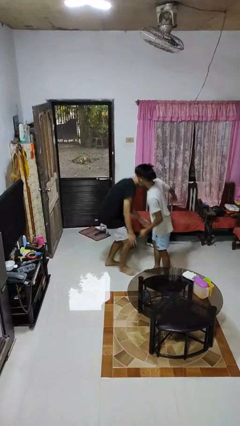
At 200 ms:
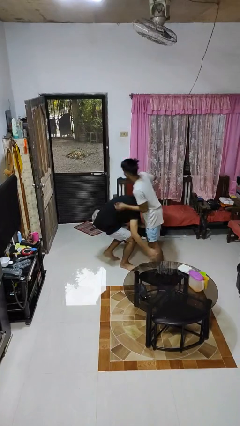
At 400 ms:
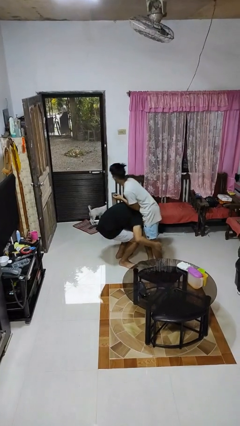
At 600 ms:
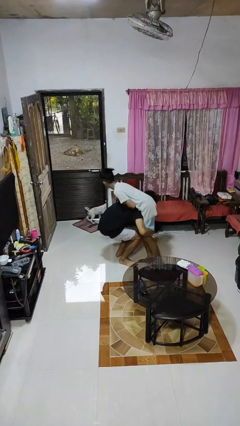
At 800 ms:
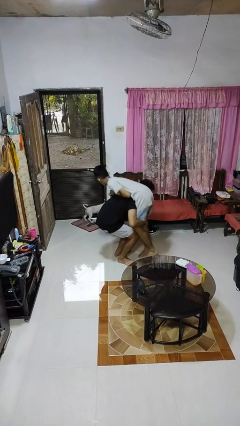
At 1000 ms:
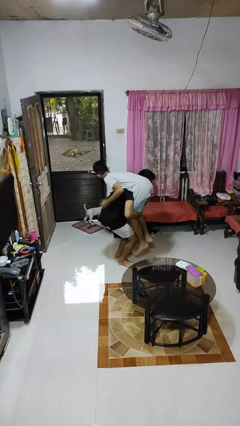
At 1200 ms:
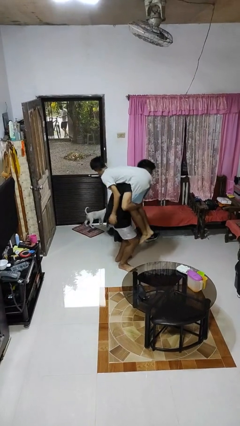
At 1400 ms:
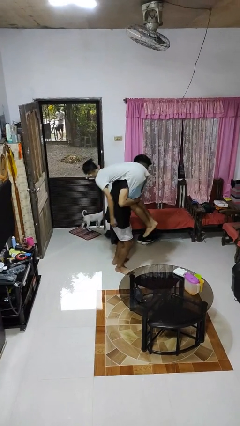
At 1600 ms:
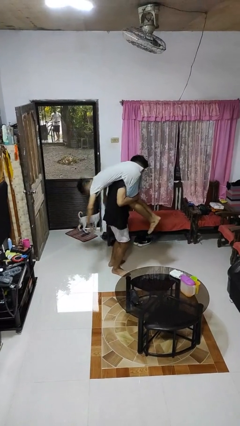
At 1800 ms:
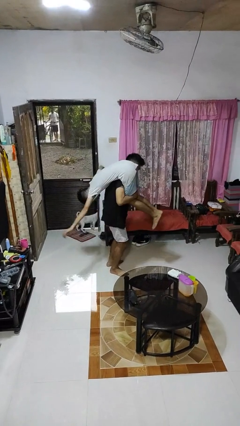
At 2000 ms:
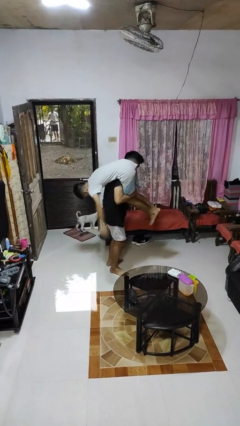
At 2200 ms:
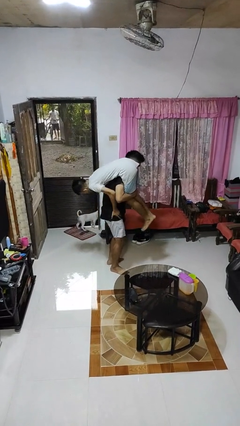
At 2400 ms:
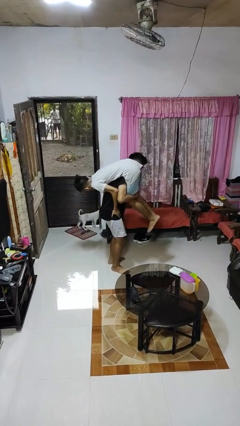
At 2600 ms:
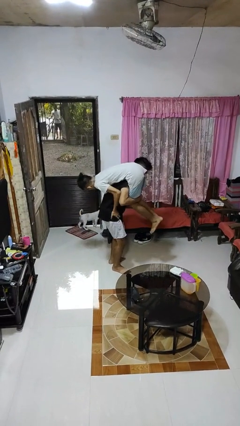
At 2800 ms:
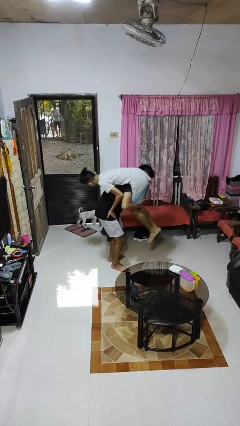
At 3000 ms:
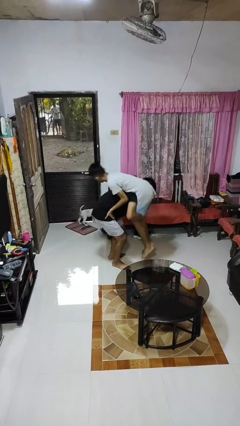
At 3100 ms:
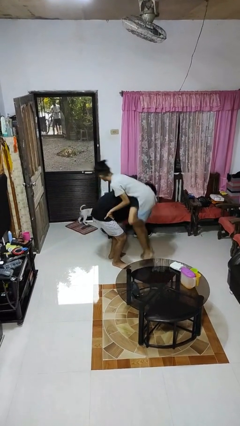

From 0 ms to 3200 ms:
person carries person over shoulder

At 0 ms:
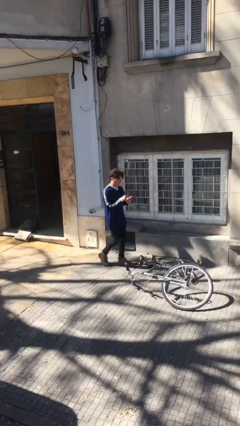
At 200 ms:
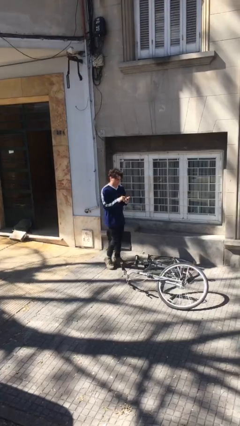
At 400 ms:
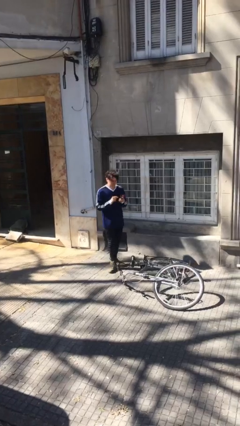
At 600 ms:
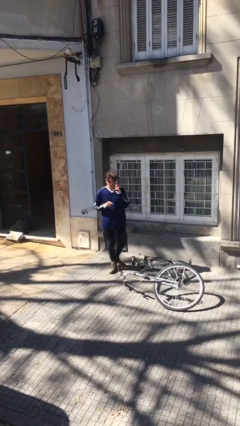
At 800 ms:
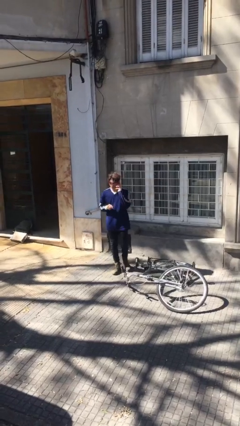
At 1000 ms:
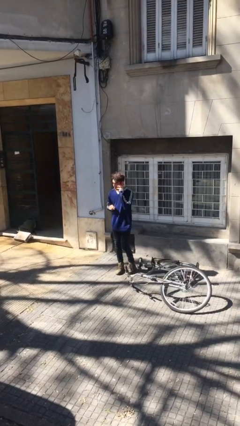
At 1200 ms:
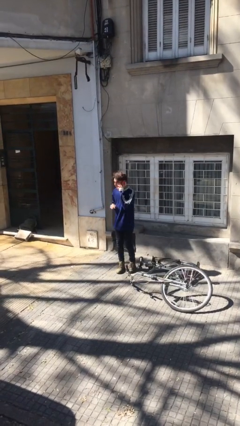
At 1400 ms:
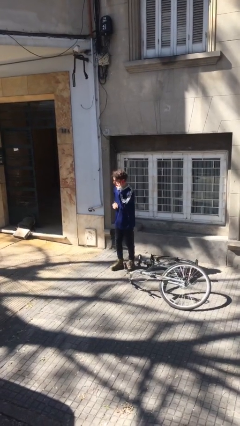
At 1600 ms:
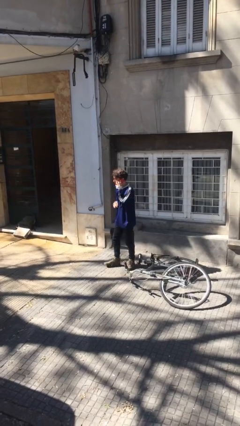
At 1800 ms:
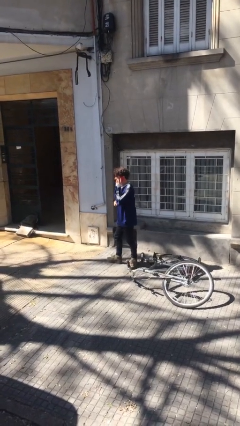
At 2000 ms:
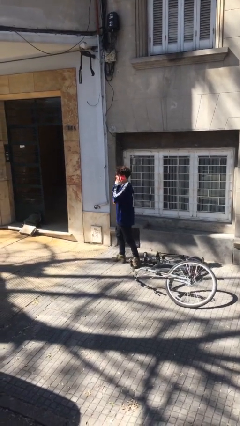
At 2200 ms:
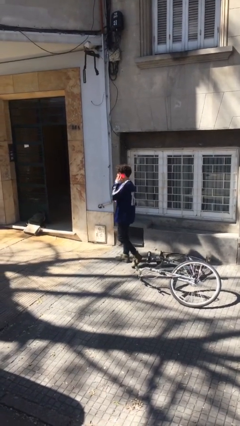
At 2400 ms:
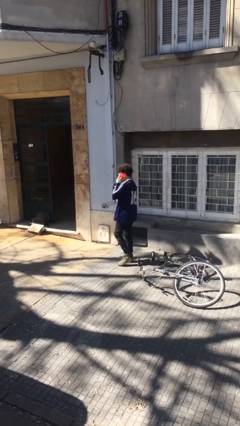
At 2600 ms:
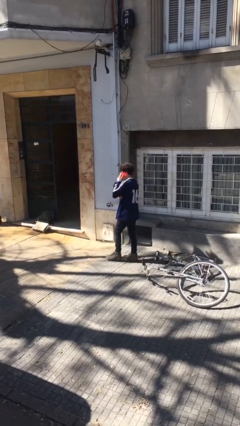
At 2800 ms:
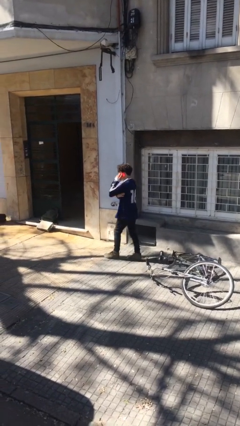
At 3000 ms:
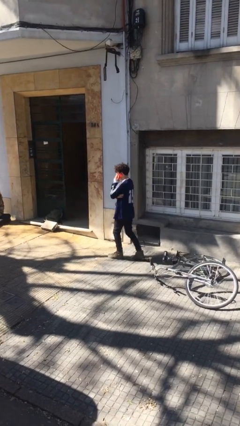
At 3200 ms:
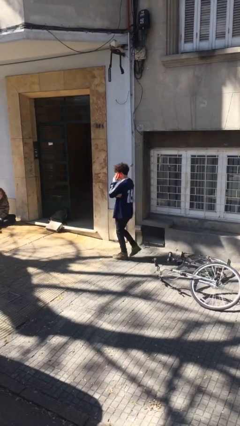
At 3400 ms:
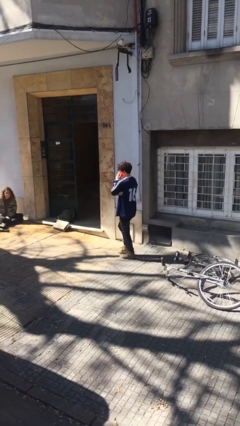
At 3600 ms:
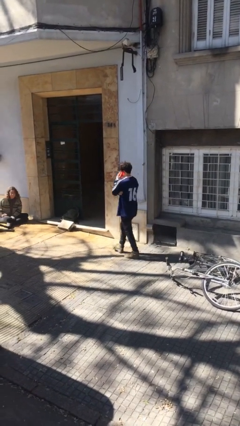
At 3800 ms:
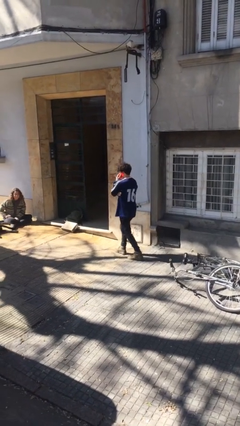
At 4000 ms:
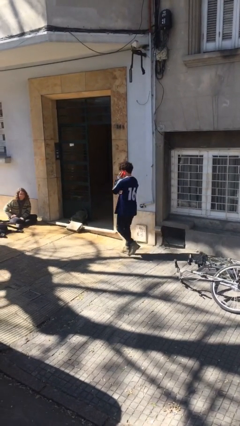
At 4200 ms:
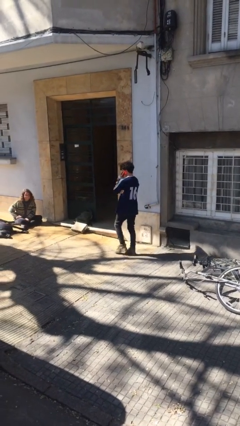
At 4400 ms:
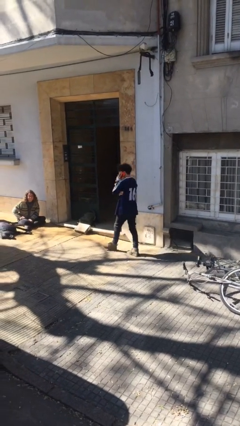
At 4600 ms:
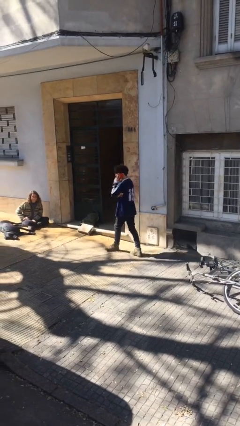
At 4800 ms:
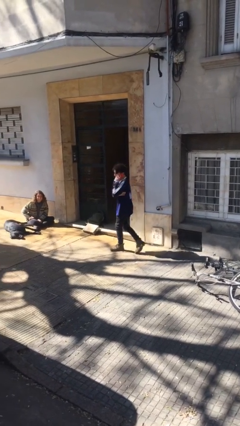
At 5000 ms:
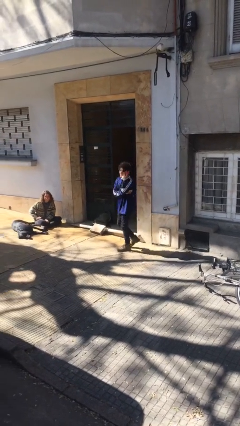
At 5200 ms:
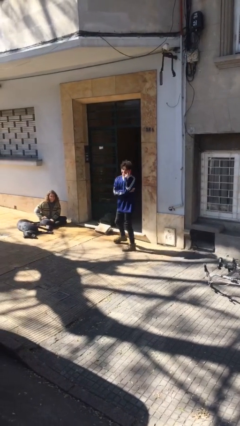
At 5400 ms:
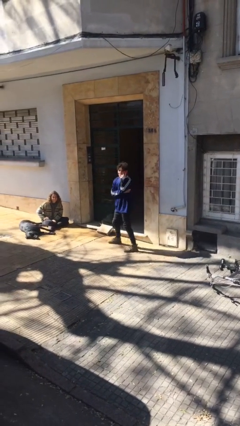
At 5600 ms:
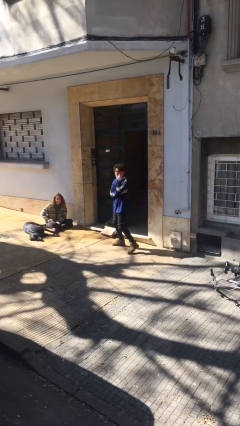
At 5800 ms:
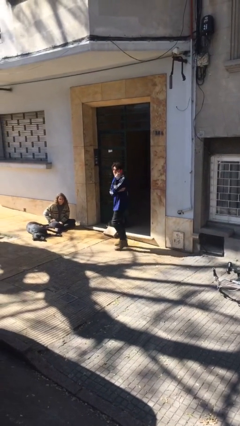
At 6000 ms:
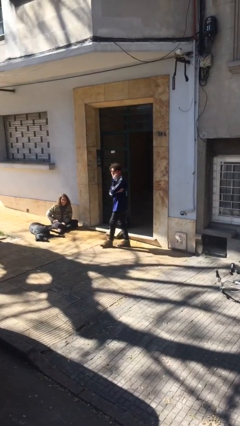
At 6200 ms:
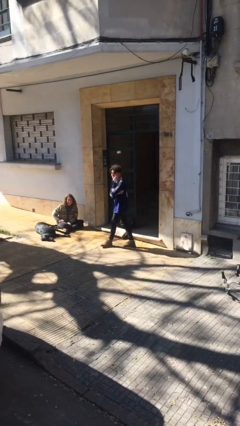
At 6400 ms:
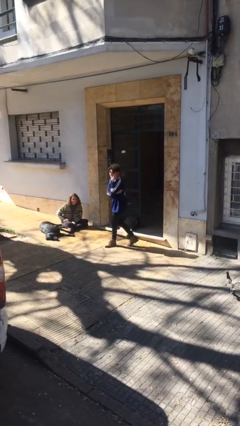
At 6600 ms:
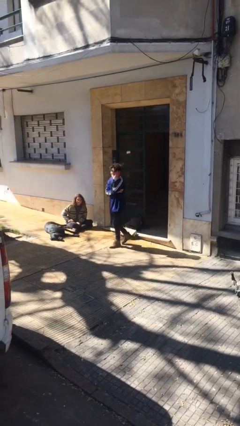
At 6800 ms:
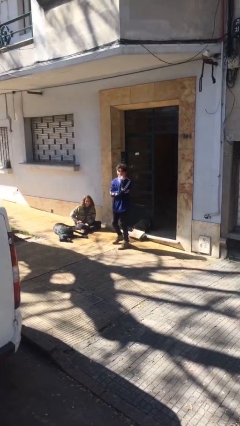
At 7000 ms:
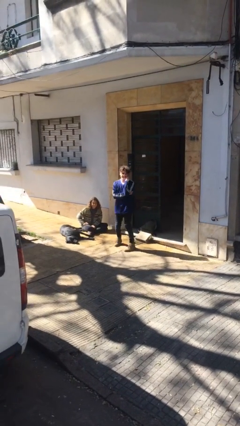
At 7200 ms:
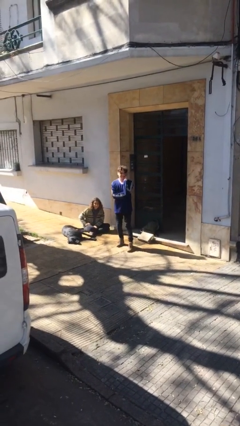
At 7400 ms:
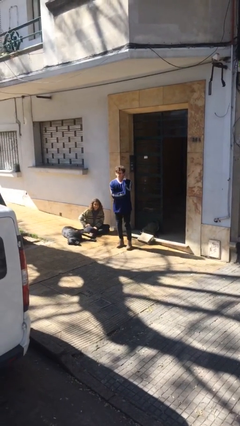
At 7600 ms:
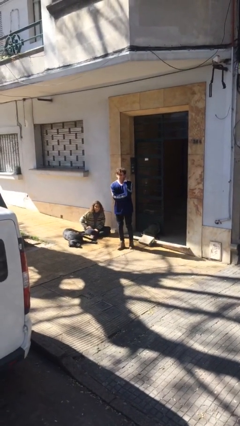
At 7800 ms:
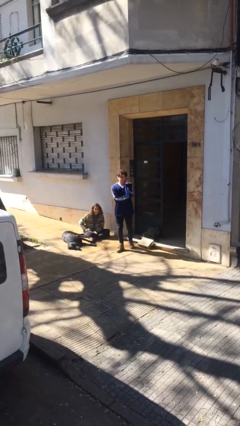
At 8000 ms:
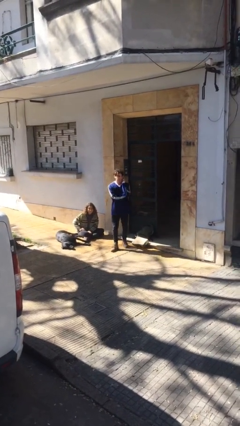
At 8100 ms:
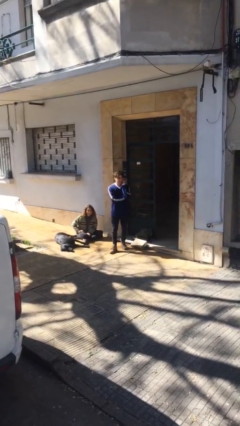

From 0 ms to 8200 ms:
person talks on phone

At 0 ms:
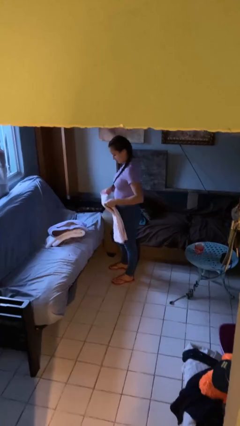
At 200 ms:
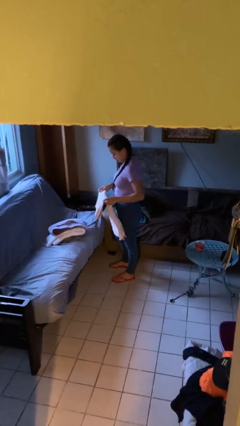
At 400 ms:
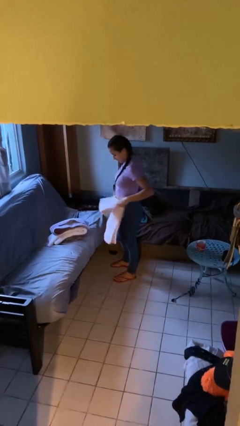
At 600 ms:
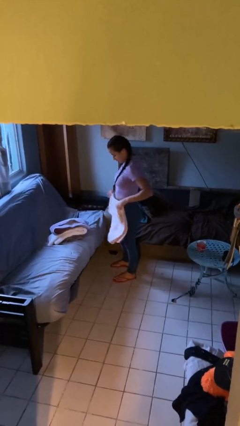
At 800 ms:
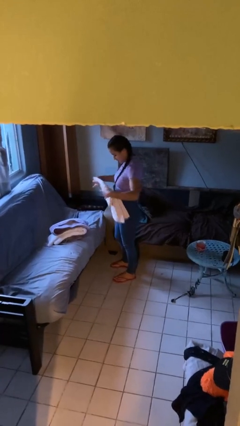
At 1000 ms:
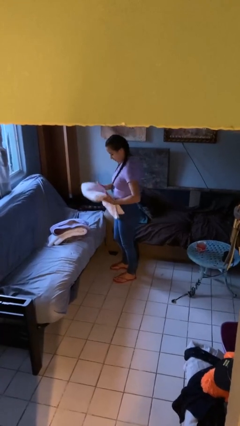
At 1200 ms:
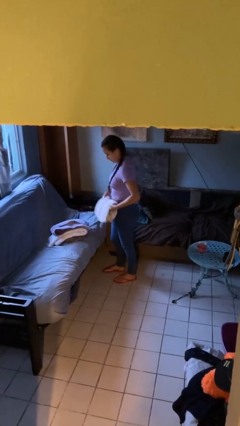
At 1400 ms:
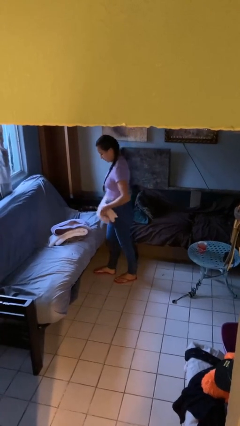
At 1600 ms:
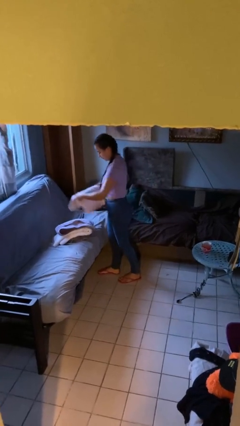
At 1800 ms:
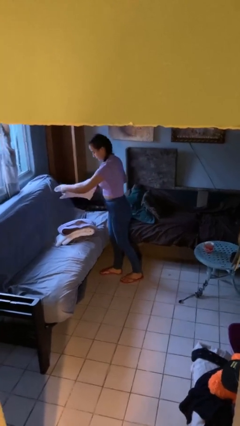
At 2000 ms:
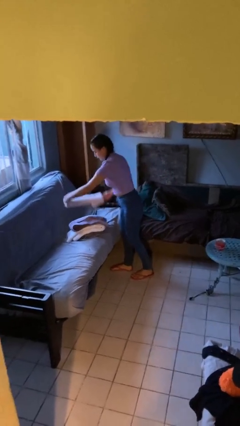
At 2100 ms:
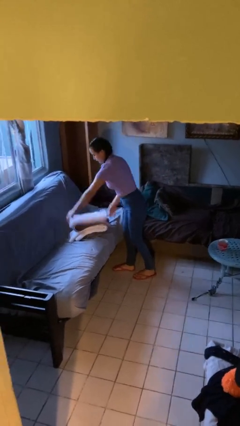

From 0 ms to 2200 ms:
person folds towel

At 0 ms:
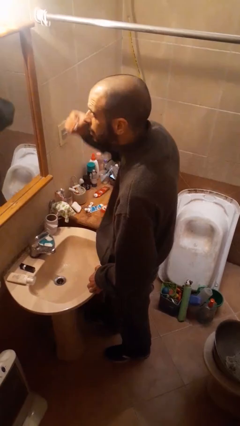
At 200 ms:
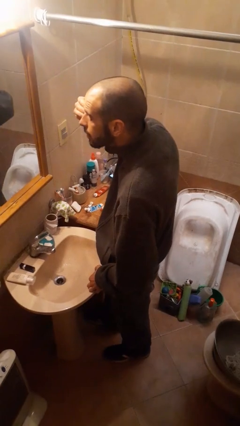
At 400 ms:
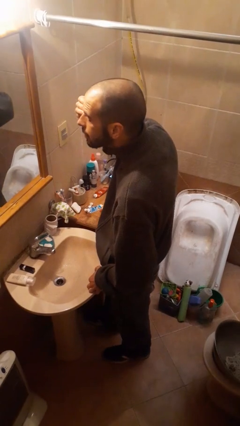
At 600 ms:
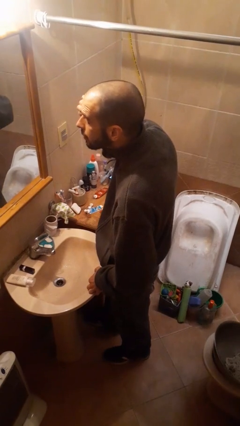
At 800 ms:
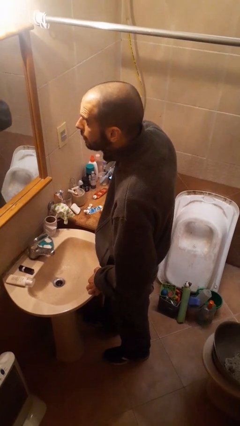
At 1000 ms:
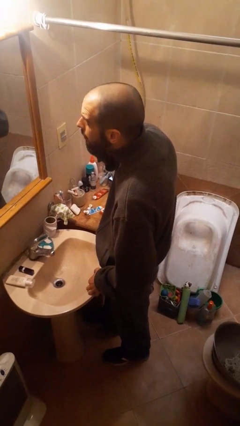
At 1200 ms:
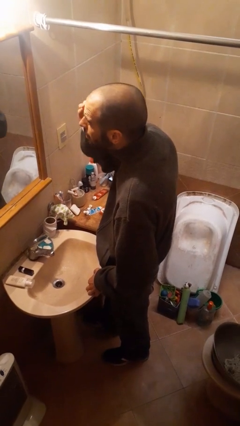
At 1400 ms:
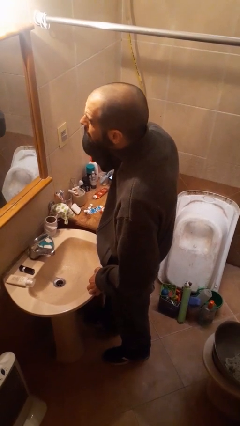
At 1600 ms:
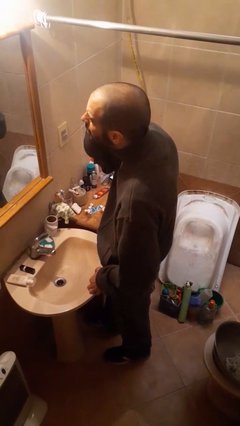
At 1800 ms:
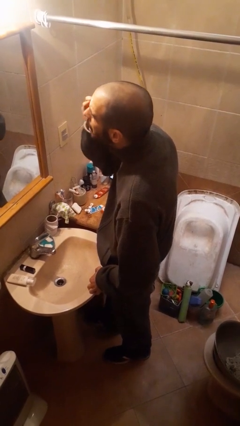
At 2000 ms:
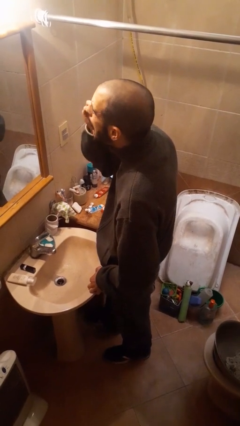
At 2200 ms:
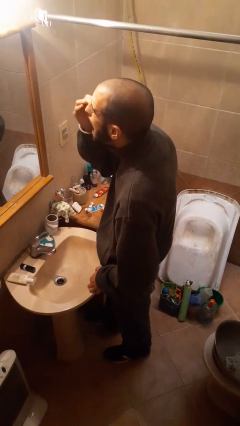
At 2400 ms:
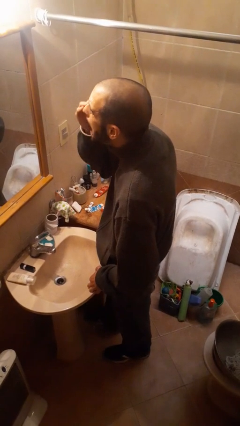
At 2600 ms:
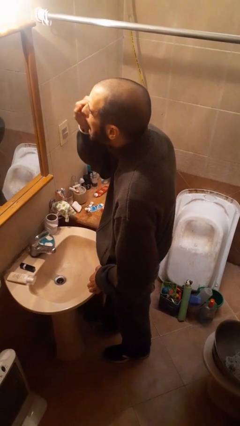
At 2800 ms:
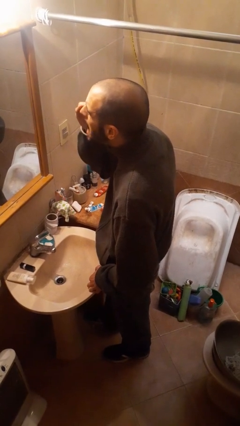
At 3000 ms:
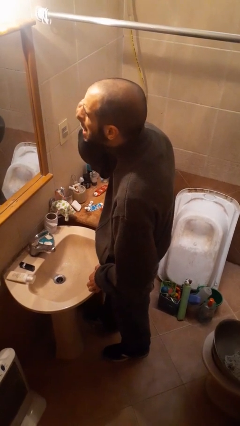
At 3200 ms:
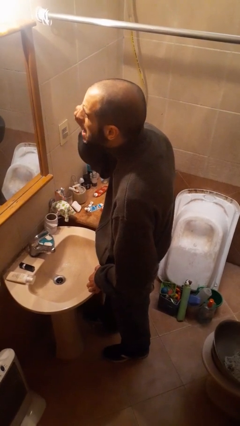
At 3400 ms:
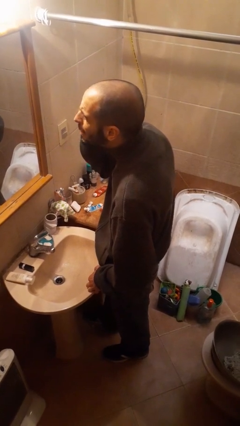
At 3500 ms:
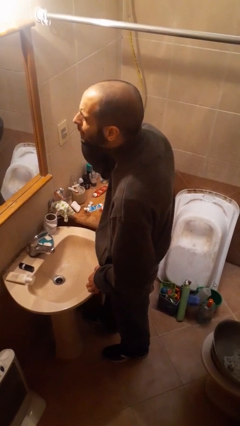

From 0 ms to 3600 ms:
person applies eye makeup

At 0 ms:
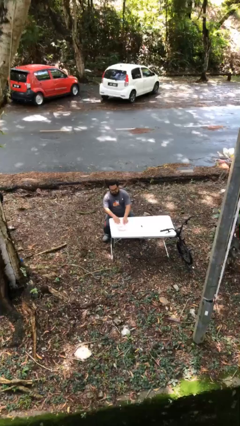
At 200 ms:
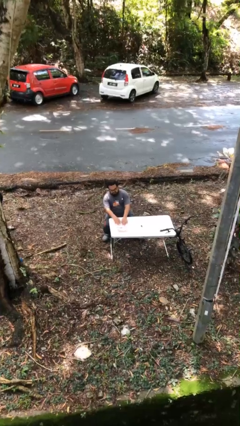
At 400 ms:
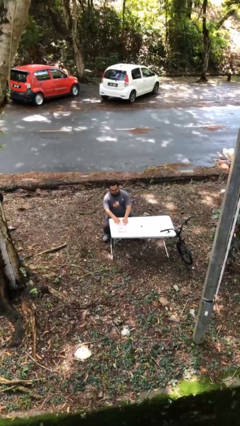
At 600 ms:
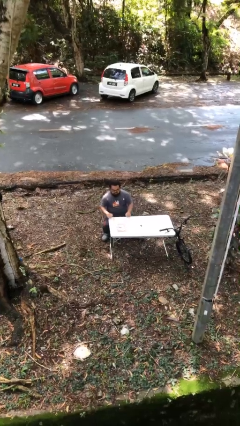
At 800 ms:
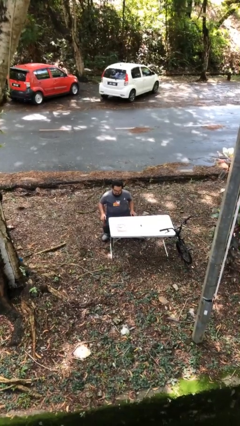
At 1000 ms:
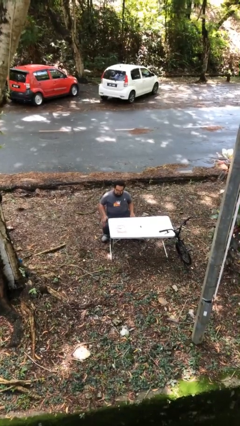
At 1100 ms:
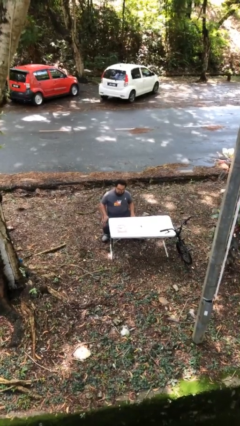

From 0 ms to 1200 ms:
person puts down object on table
